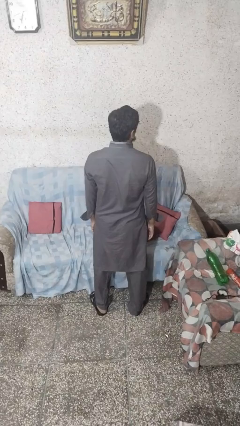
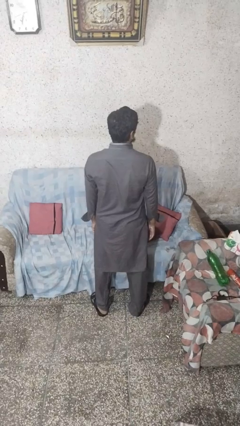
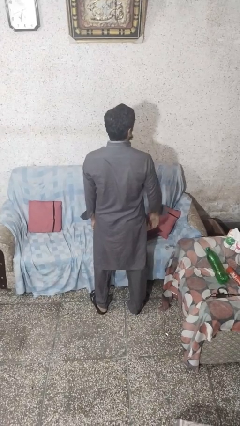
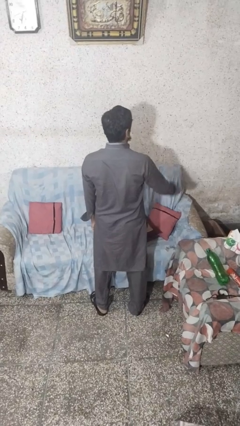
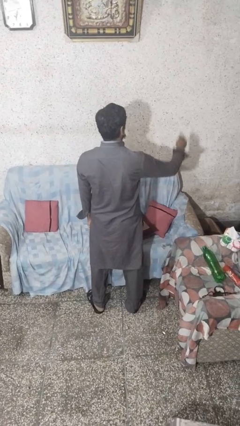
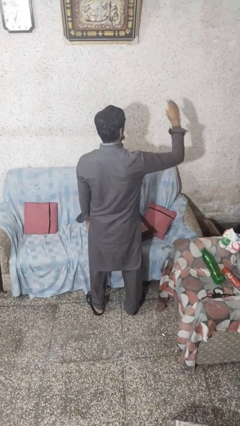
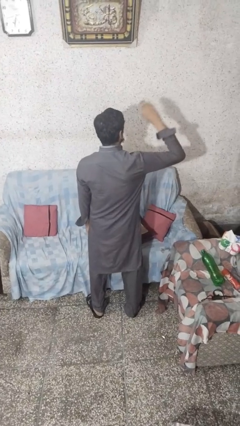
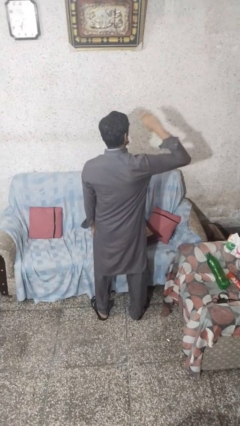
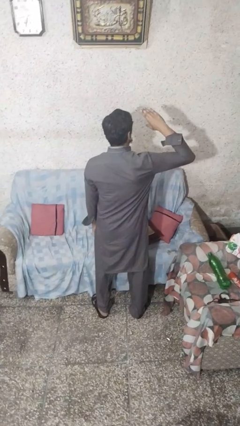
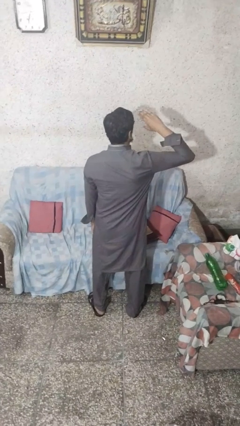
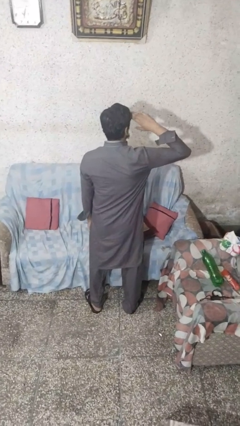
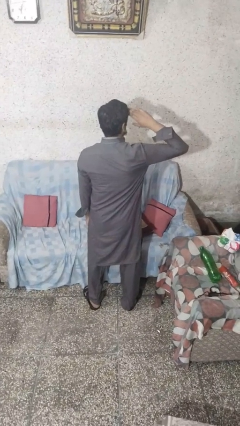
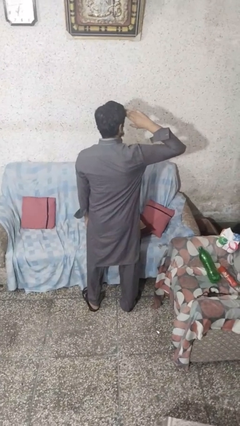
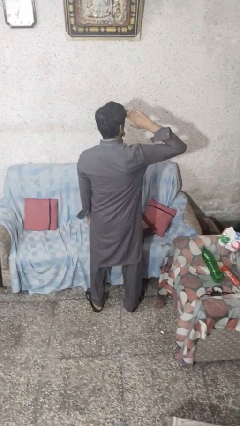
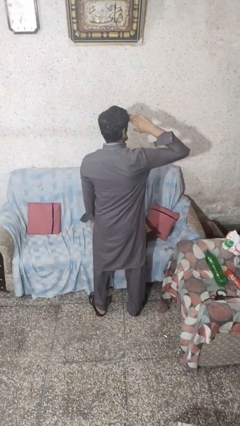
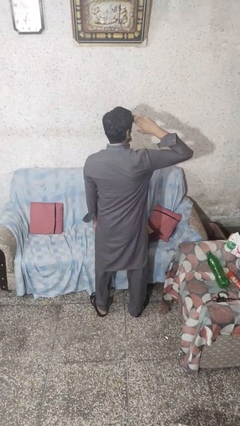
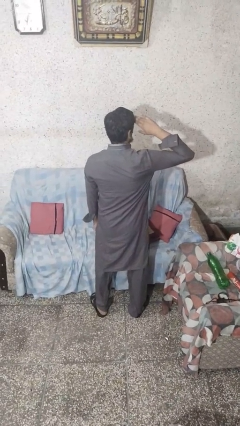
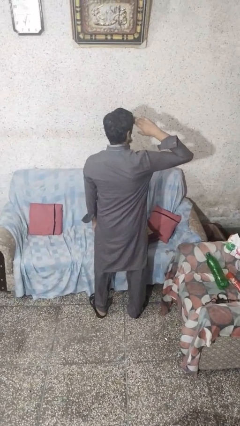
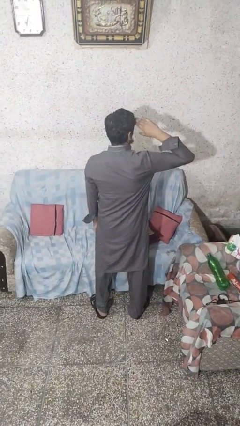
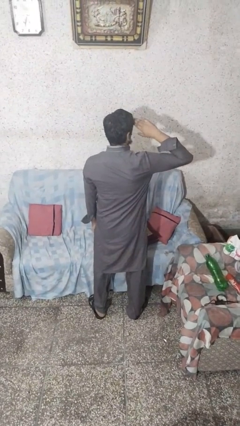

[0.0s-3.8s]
person salutes

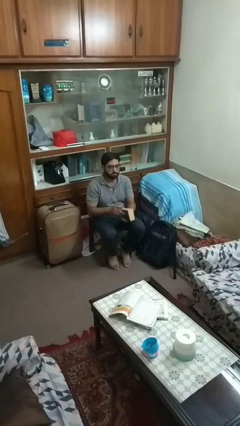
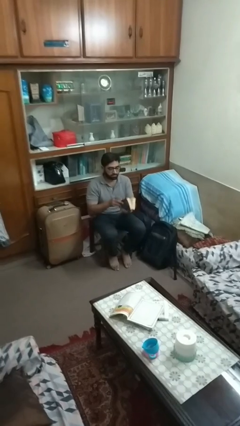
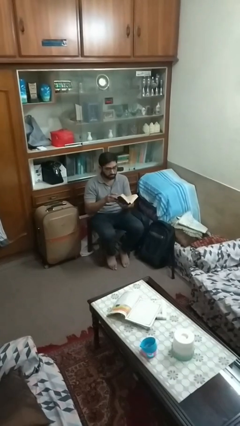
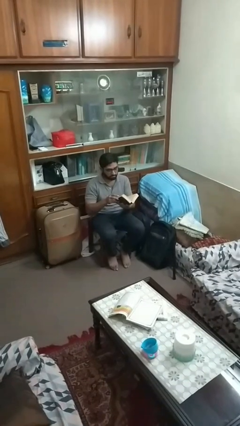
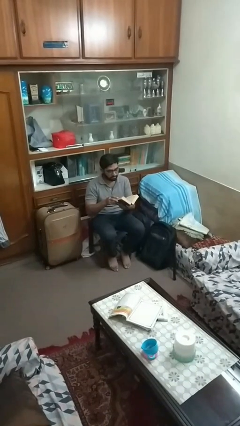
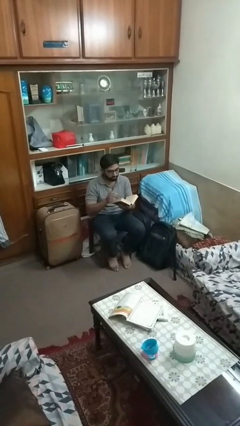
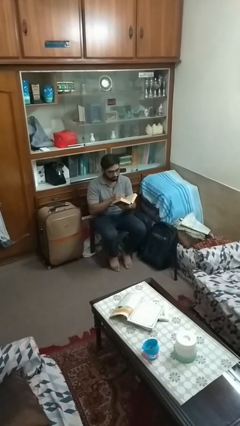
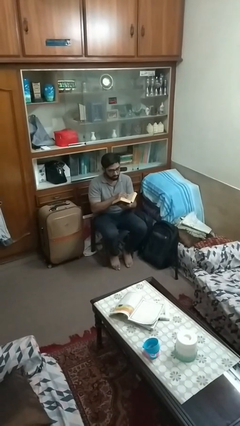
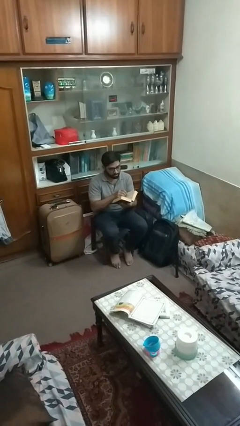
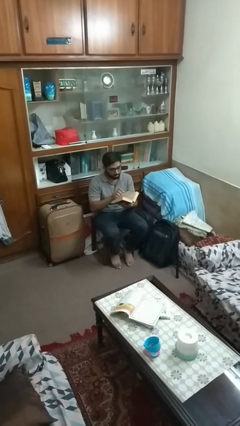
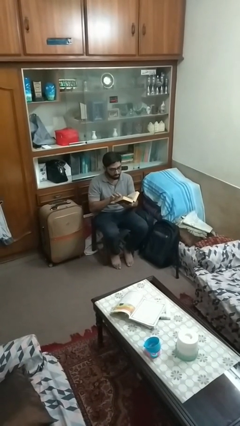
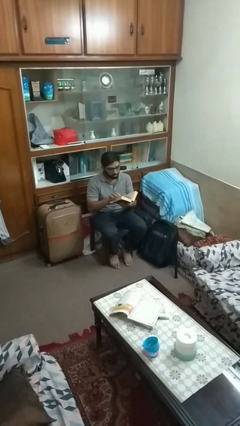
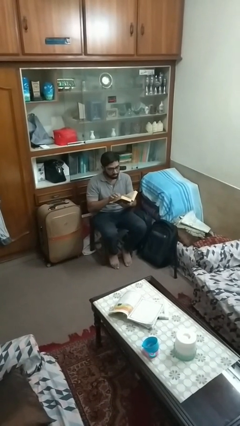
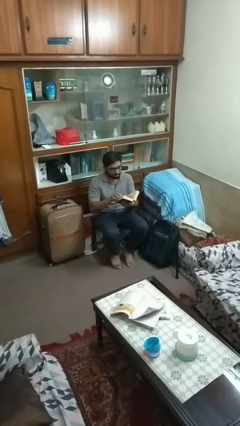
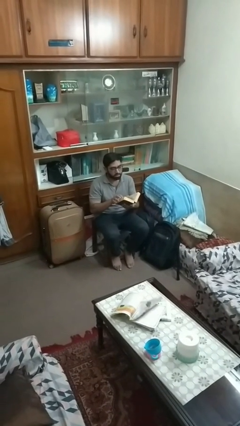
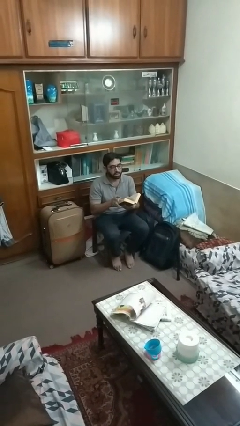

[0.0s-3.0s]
person reads book

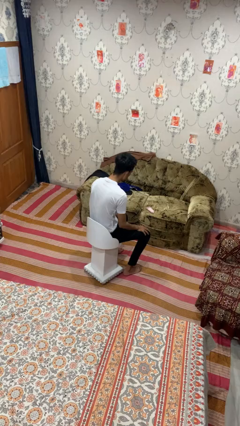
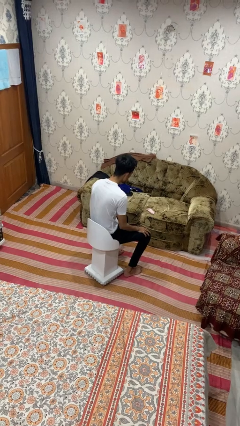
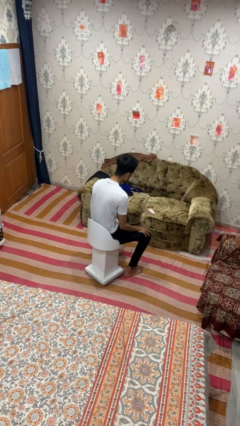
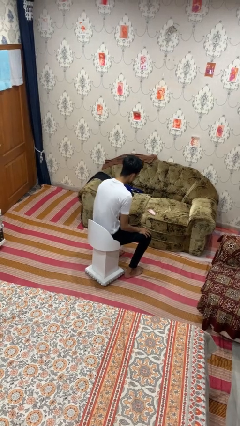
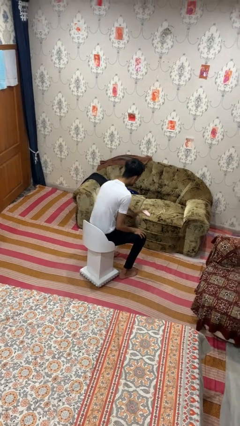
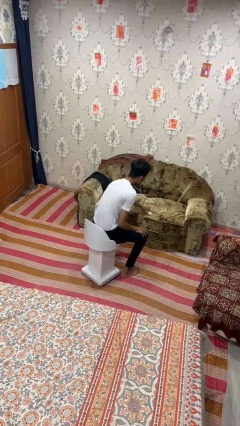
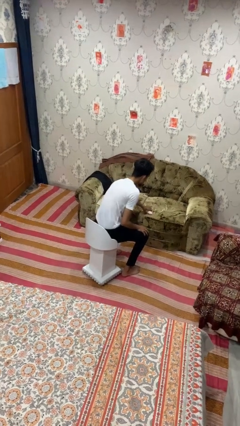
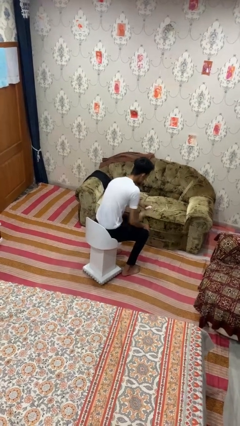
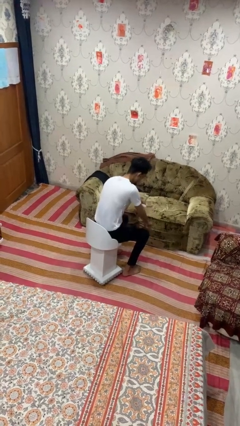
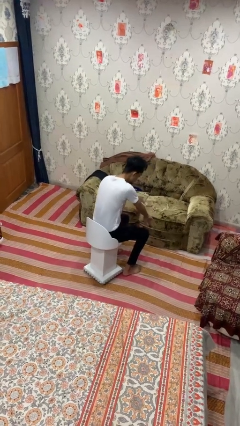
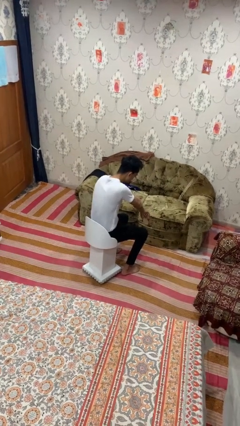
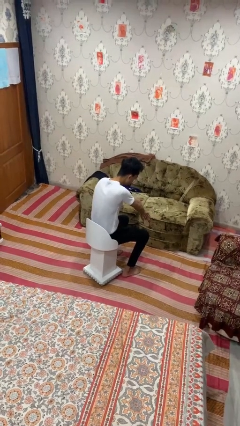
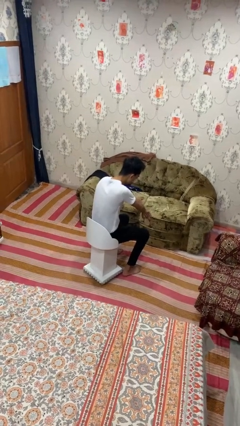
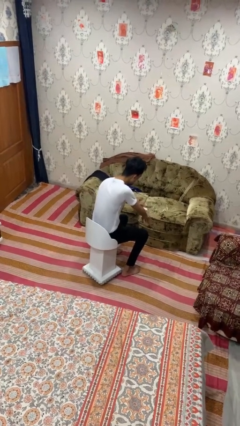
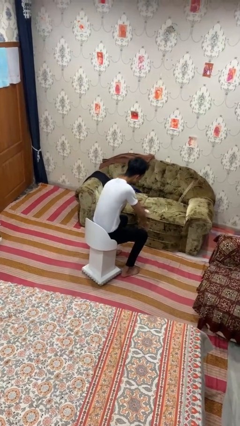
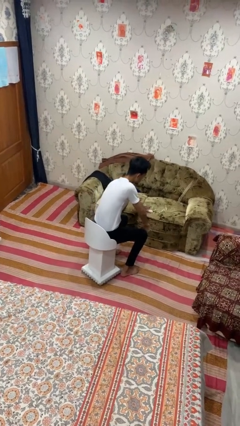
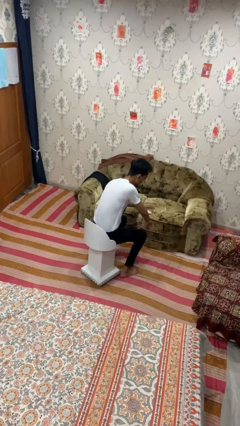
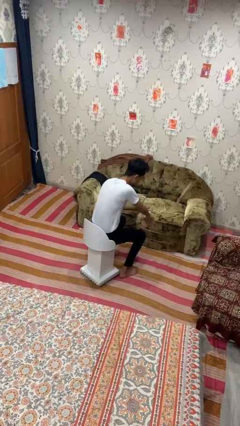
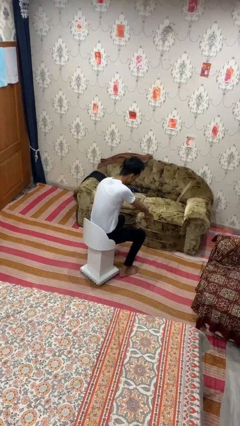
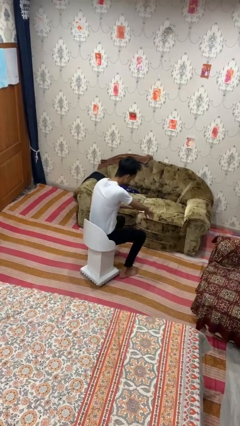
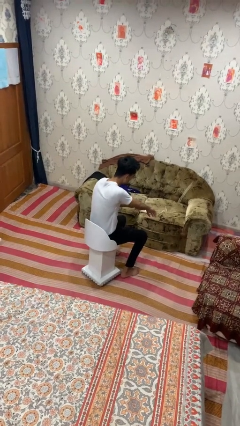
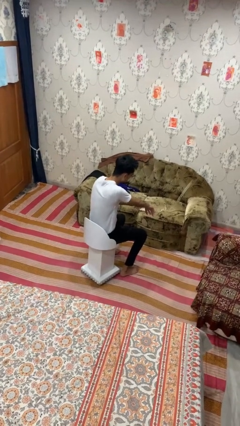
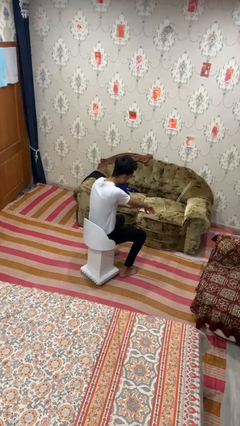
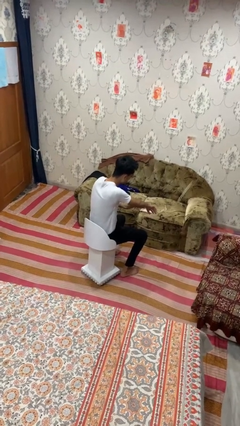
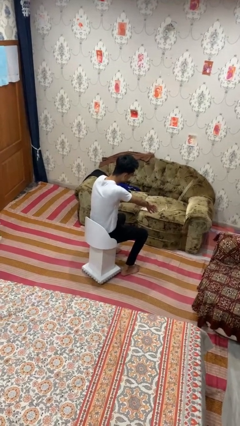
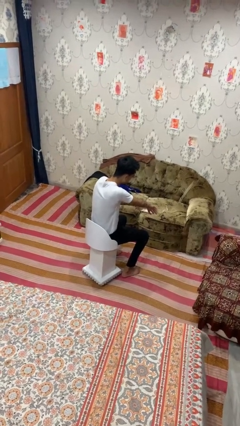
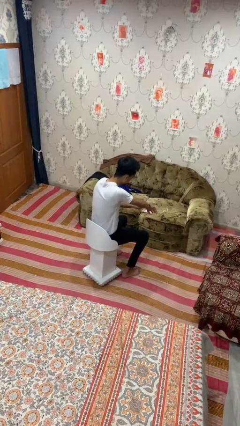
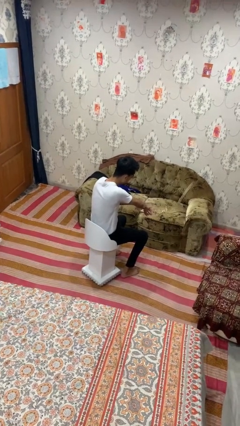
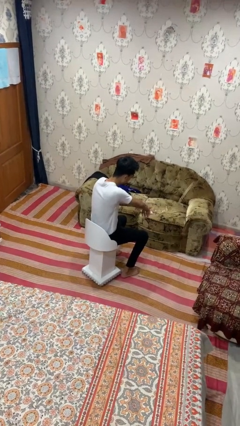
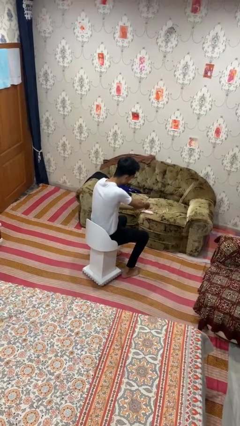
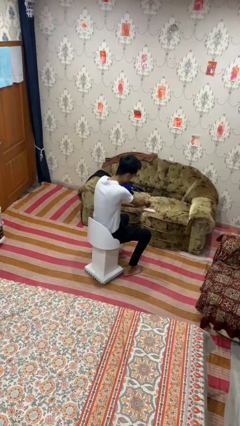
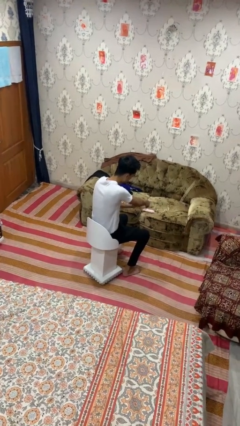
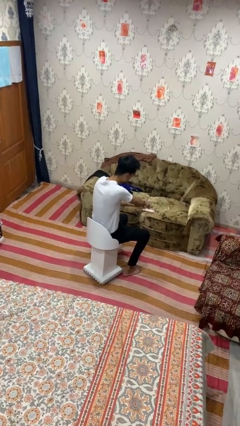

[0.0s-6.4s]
person applies sunscreen

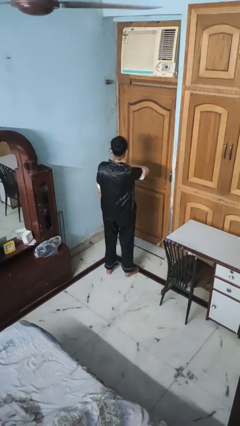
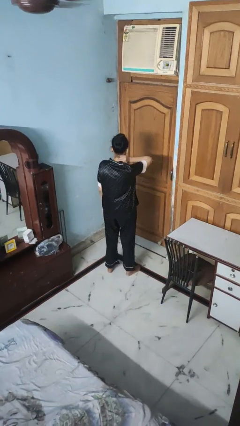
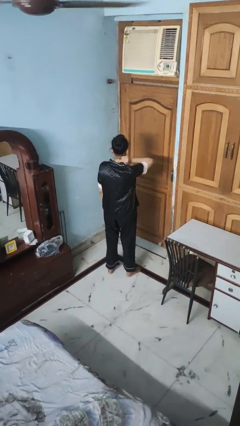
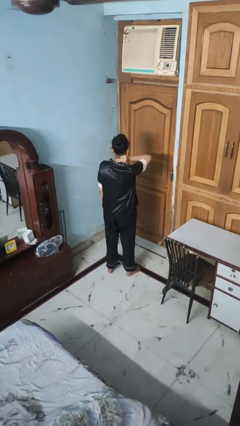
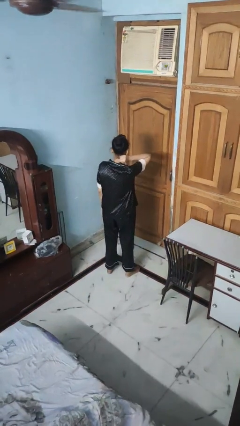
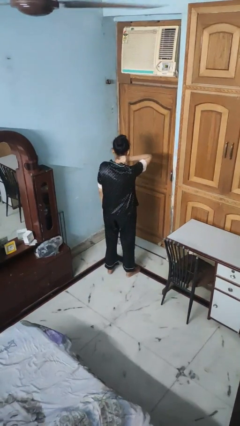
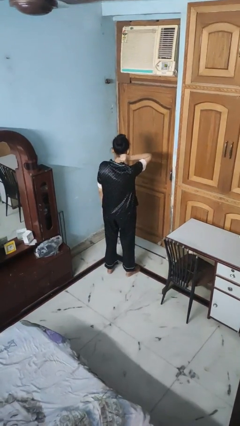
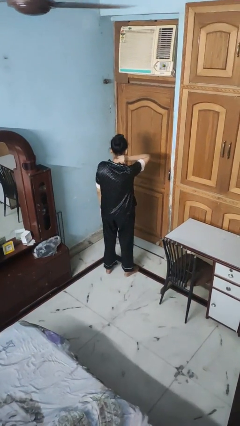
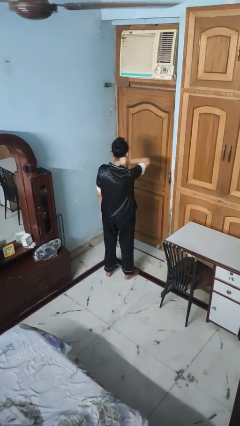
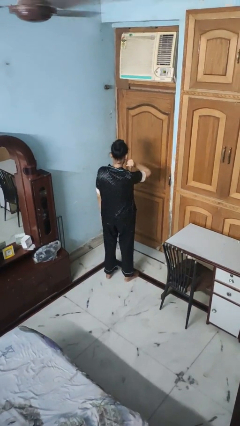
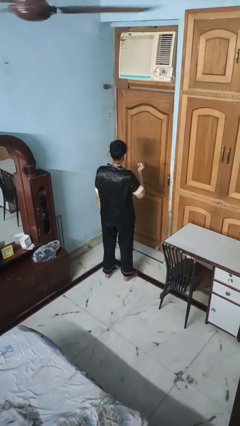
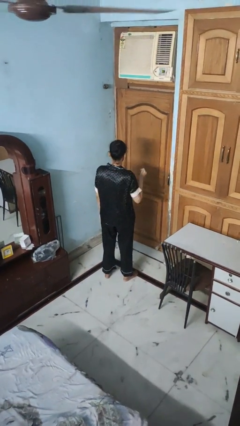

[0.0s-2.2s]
person rubs neck

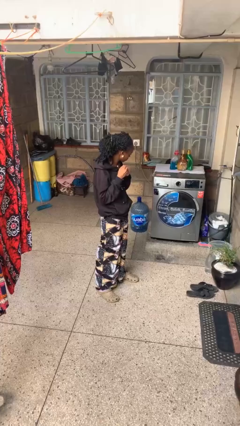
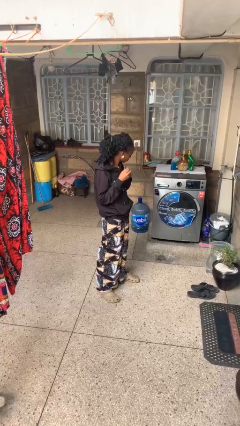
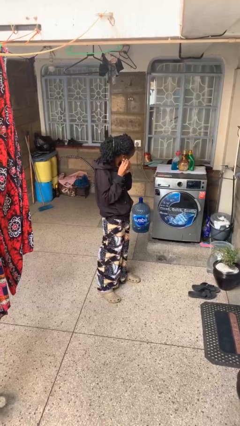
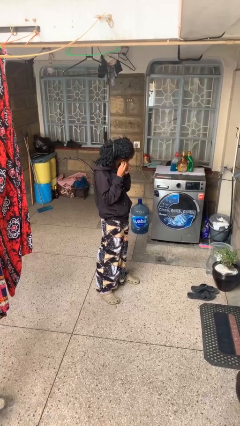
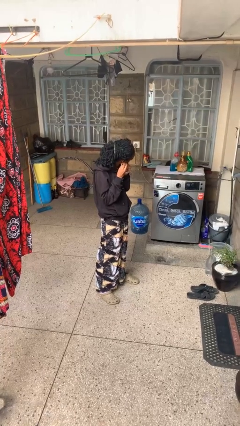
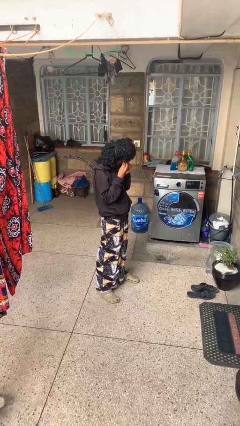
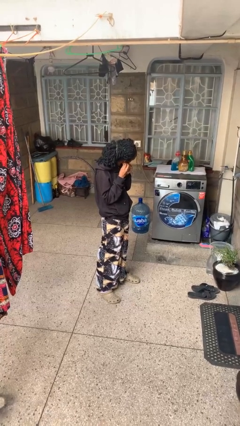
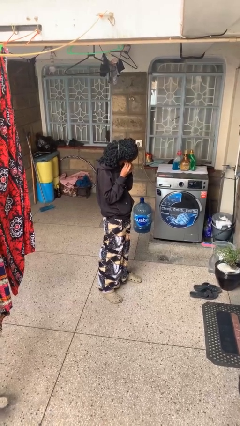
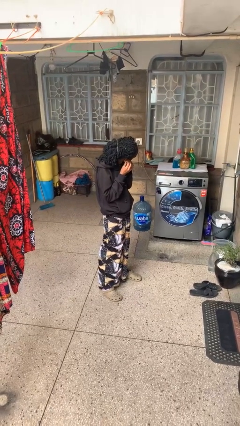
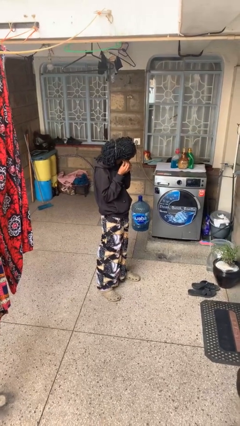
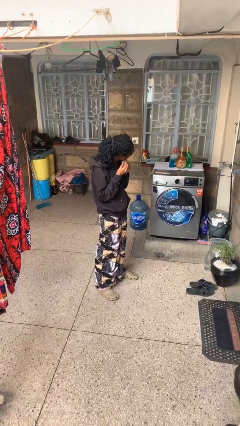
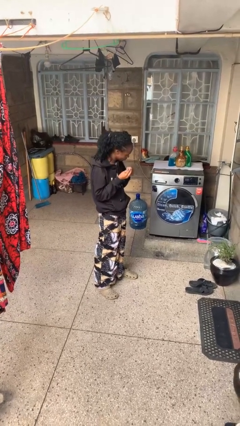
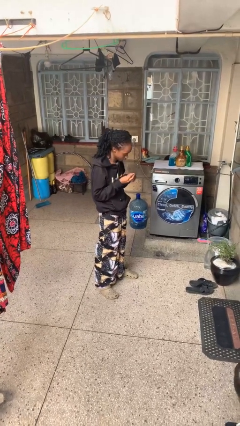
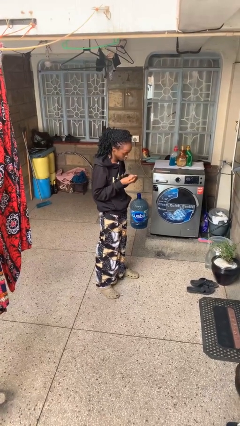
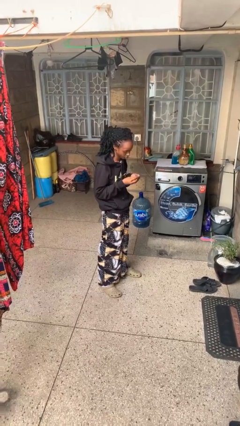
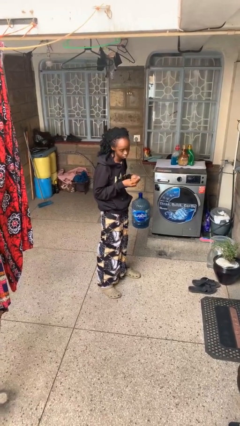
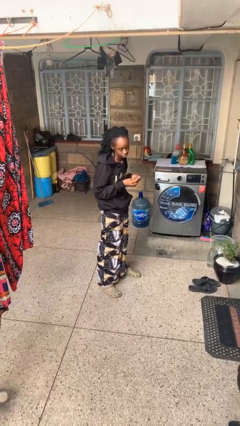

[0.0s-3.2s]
person takes off earrings
